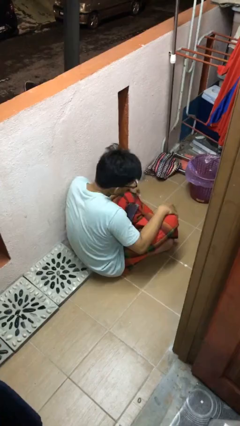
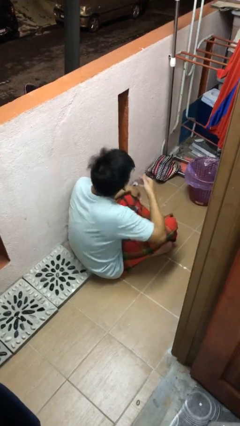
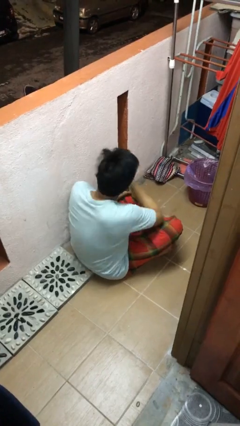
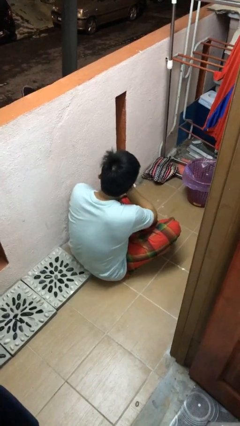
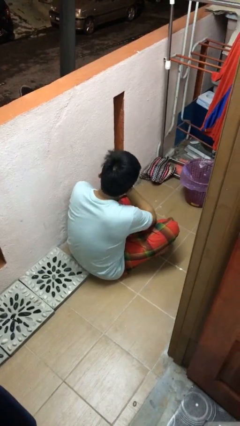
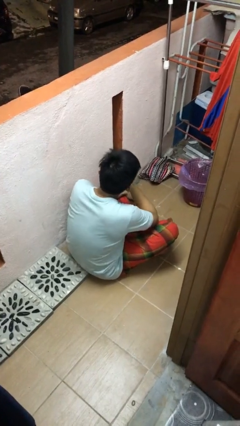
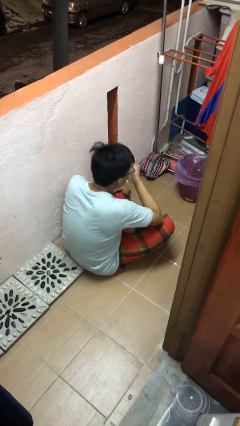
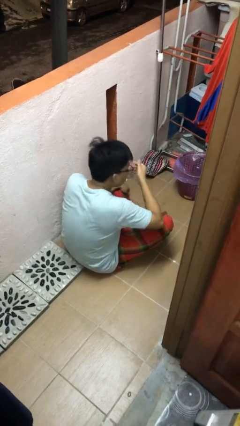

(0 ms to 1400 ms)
person sneezes into hand

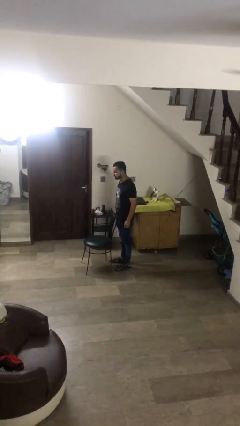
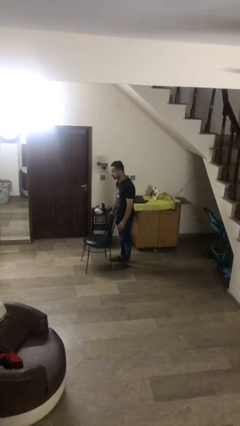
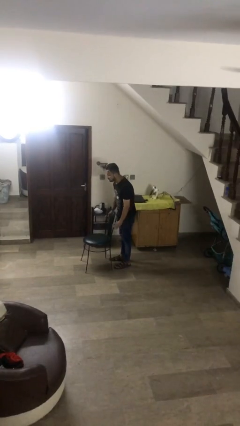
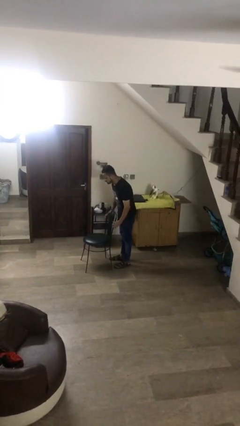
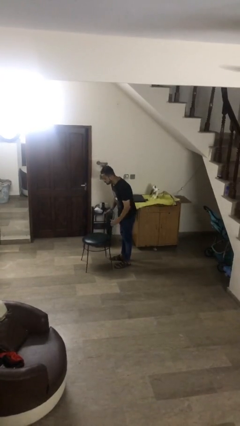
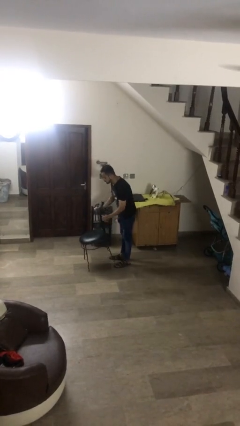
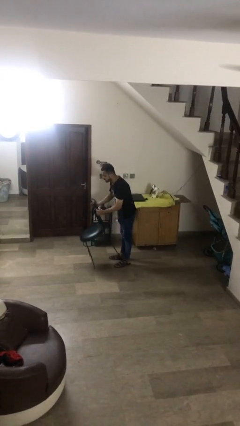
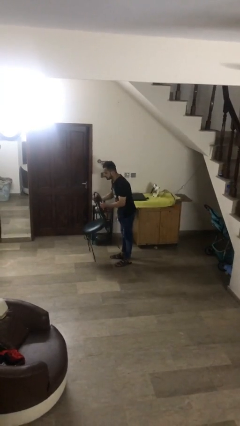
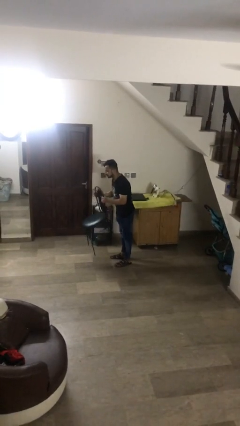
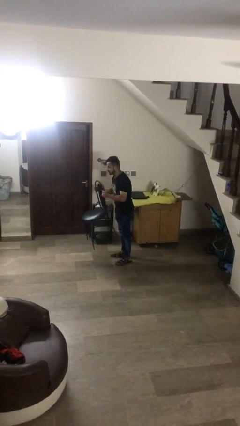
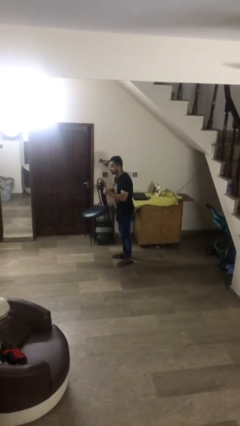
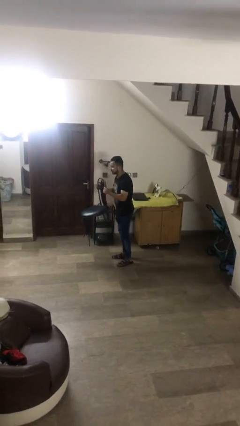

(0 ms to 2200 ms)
person picks up object from floor

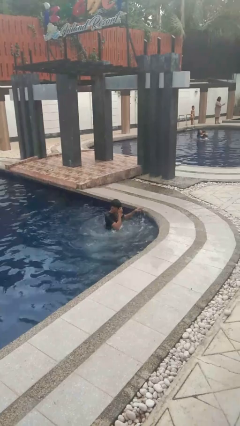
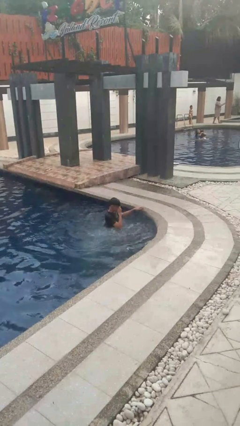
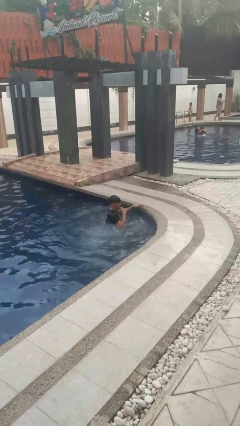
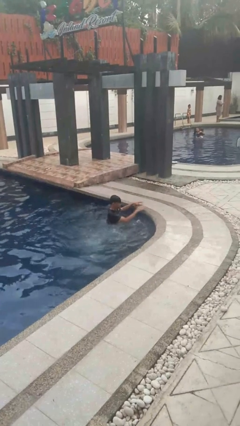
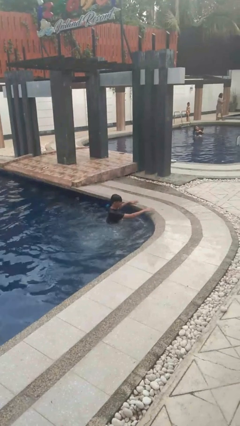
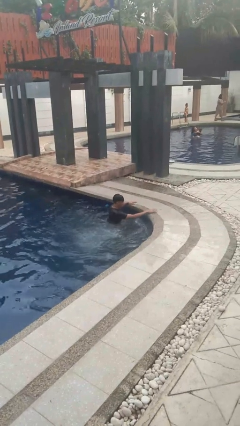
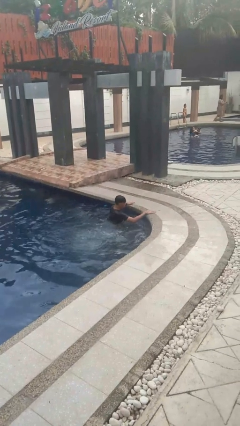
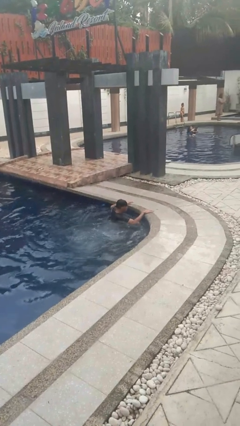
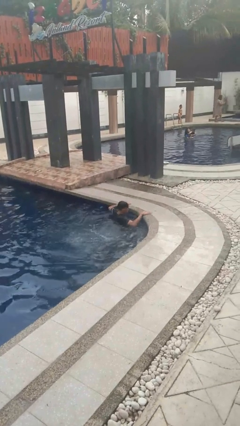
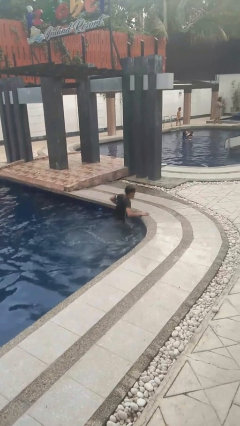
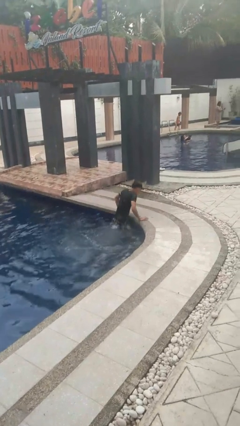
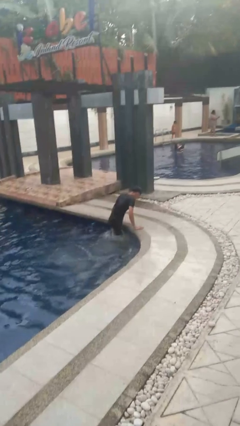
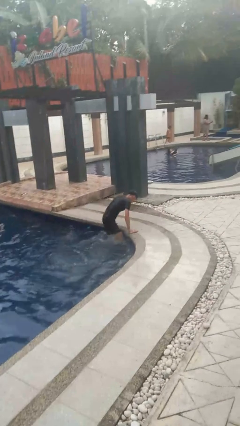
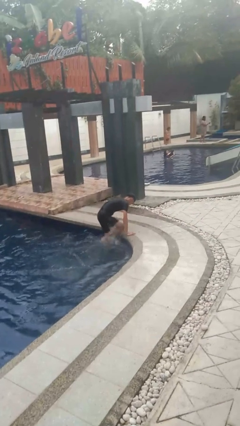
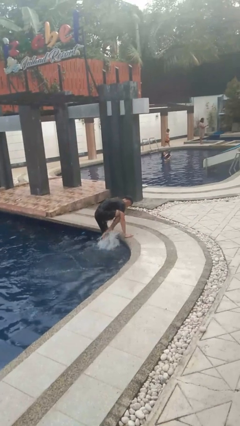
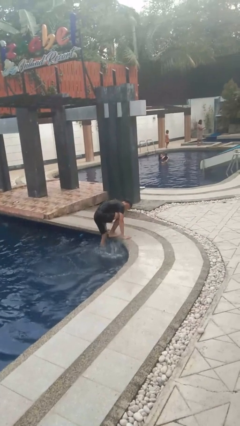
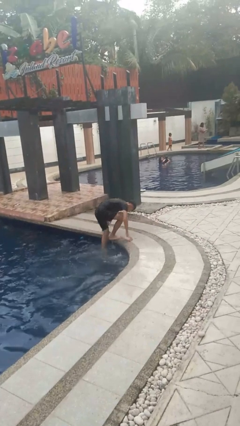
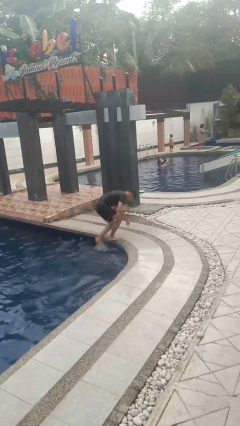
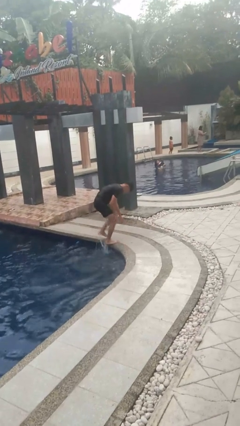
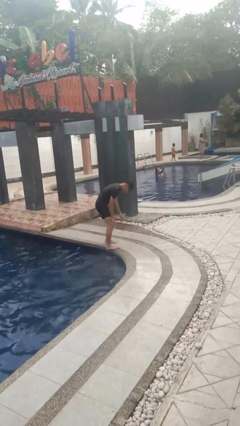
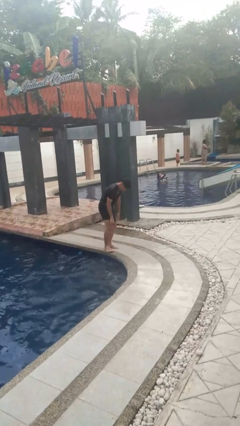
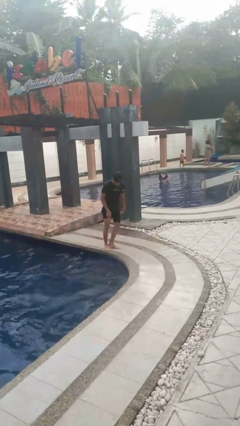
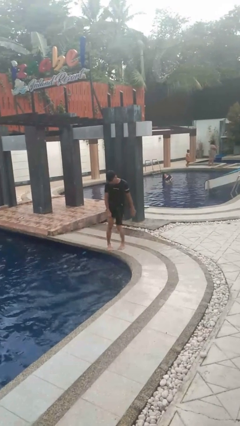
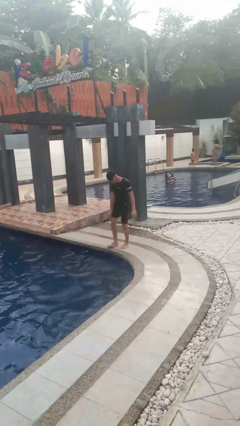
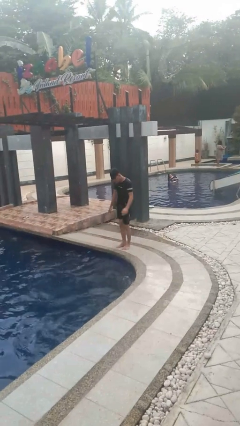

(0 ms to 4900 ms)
person exits pool

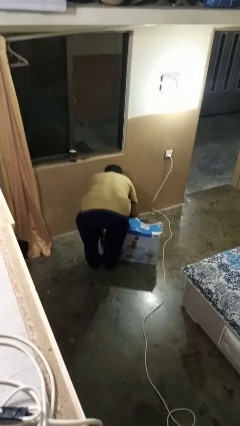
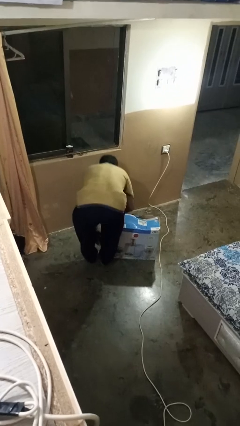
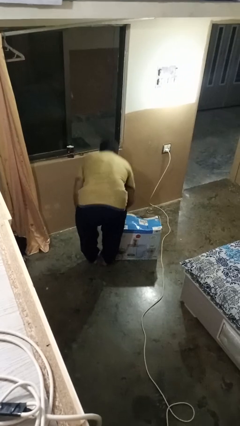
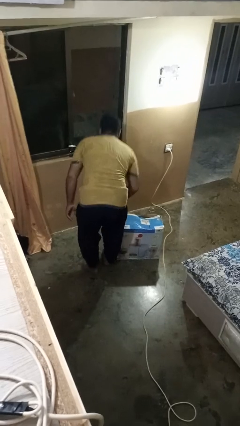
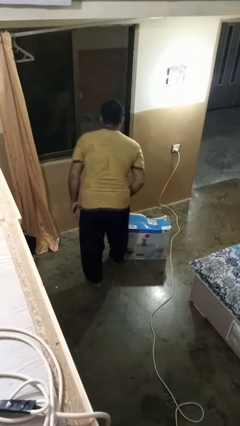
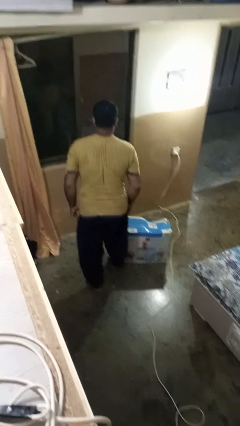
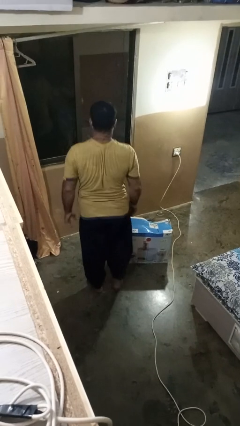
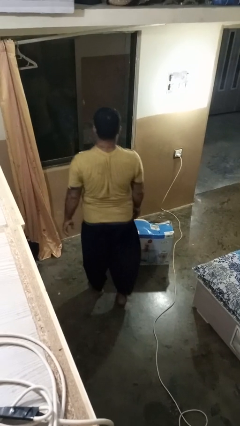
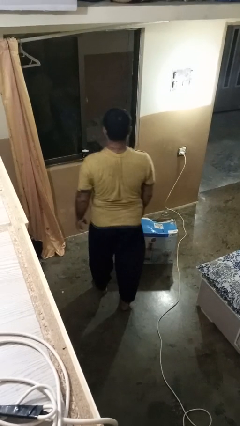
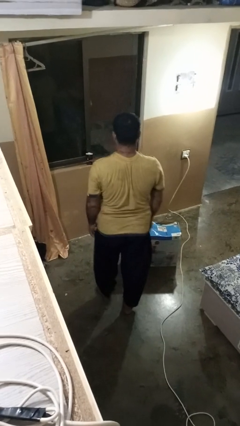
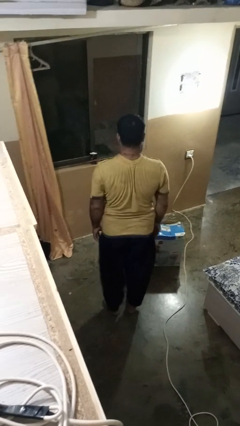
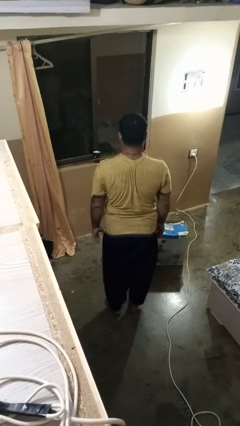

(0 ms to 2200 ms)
person stands up from floor

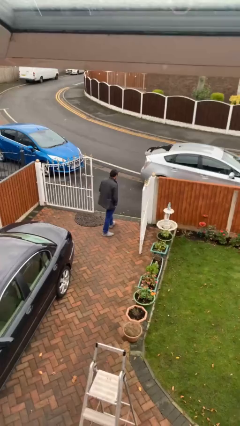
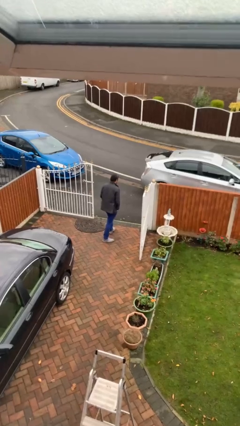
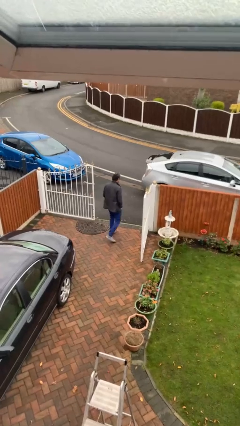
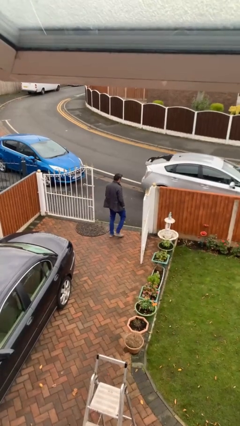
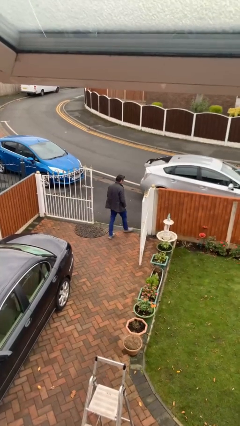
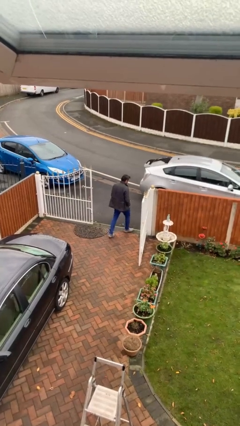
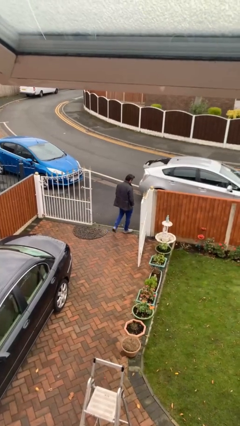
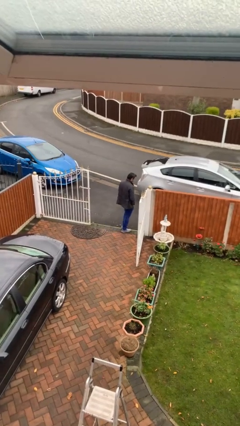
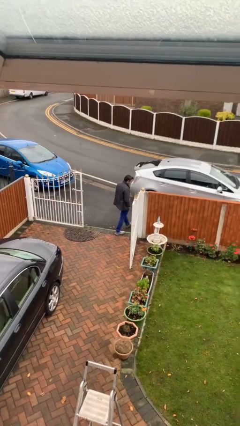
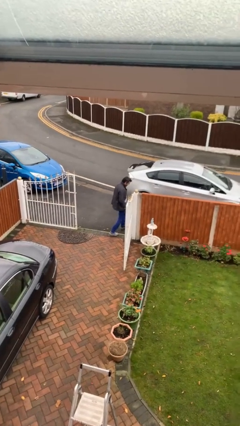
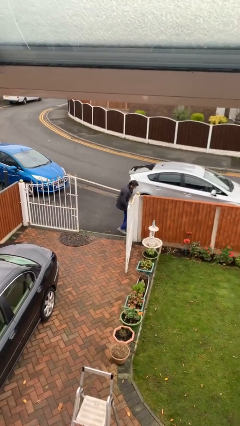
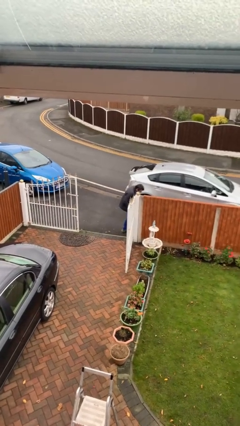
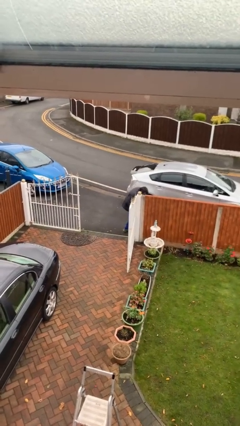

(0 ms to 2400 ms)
person exits scene through structure

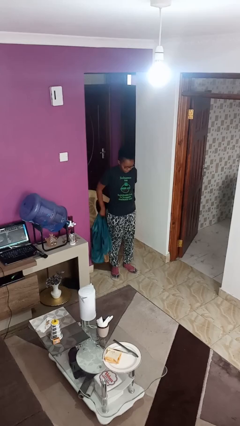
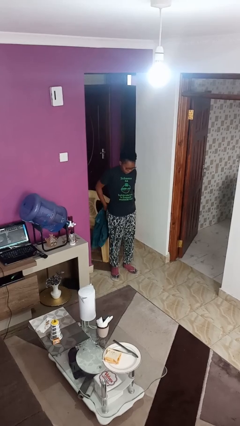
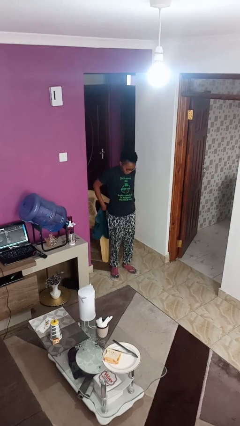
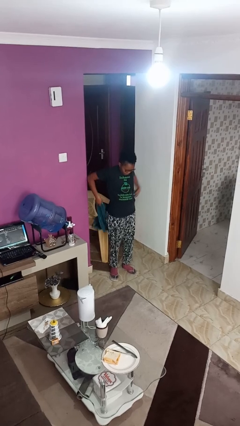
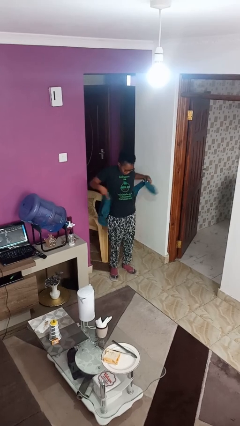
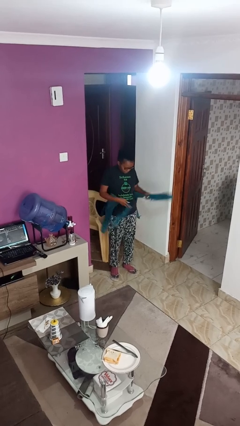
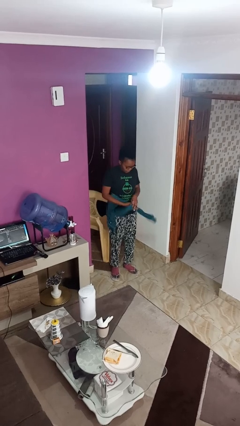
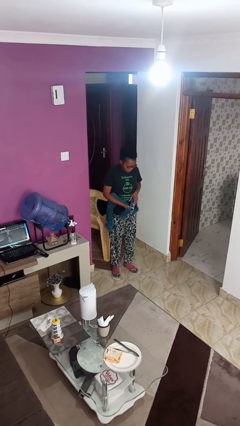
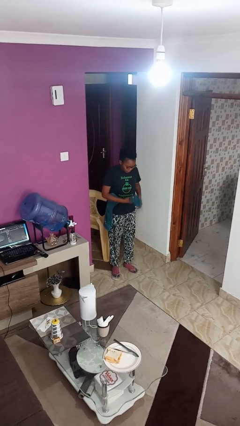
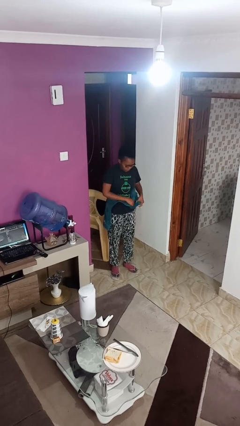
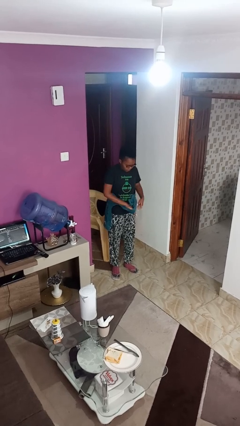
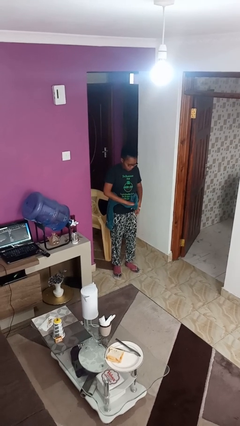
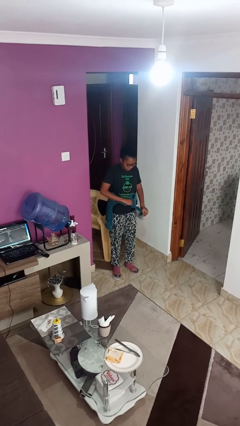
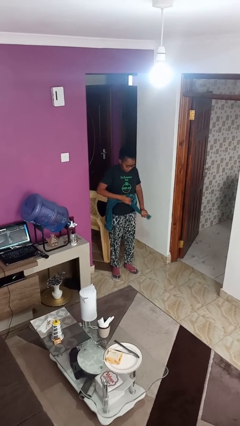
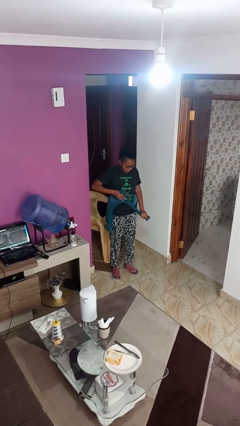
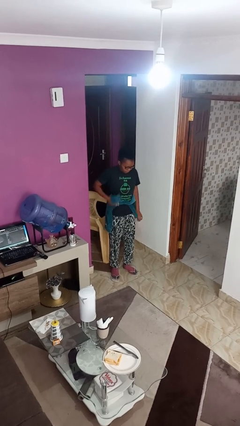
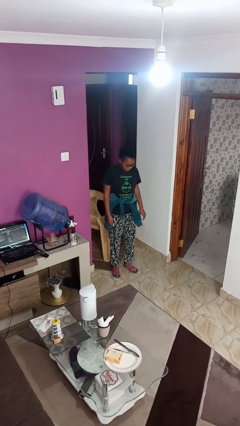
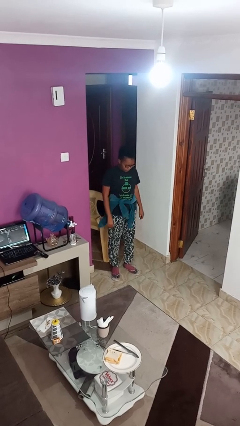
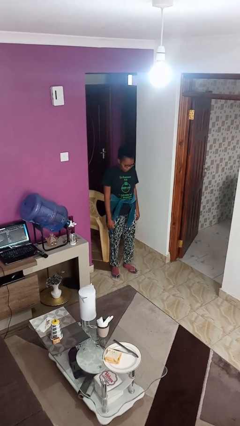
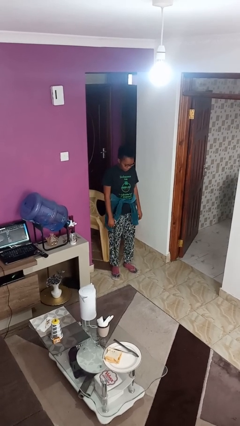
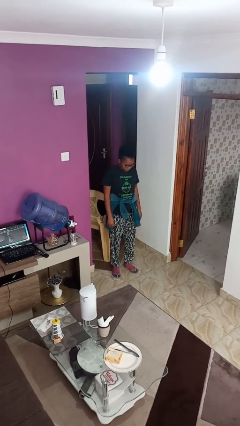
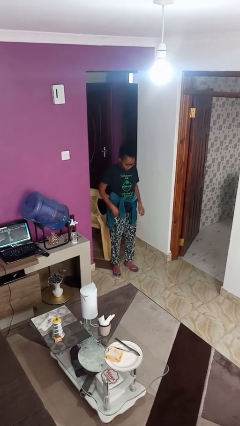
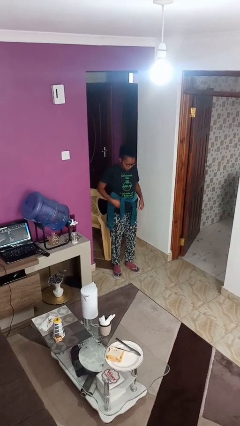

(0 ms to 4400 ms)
person ties jacket around waist

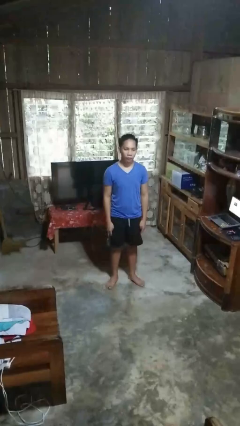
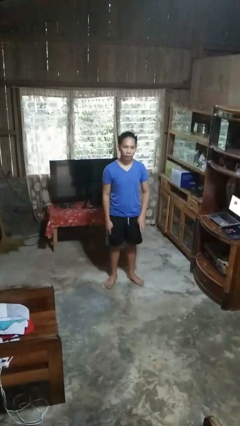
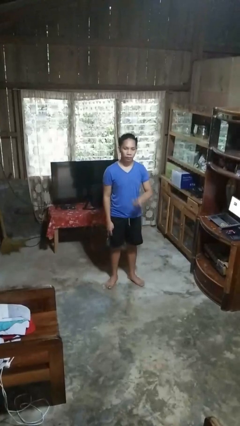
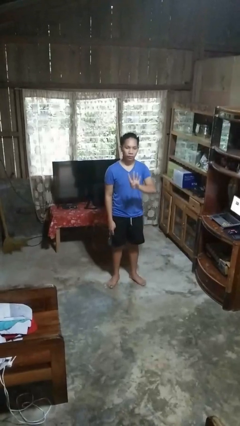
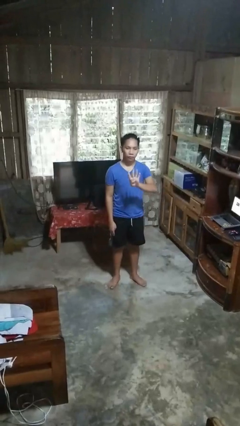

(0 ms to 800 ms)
person gestures number four
